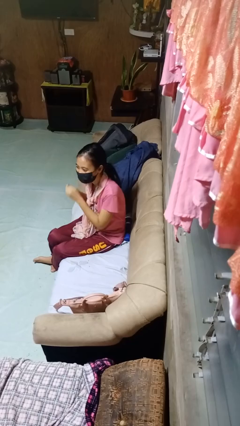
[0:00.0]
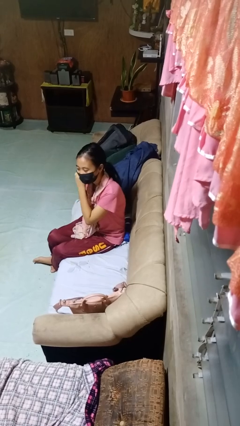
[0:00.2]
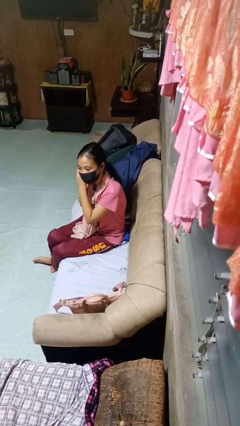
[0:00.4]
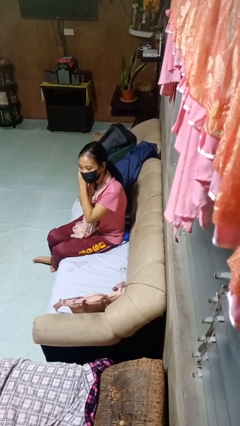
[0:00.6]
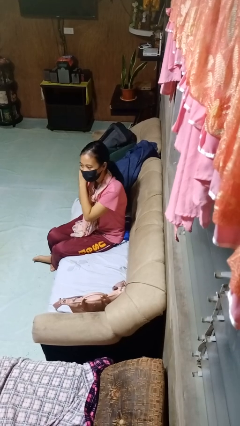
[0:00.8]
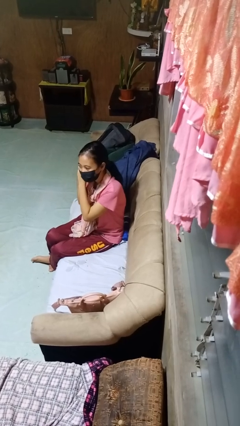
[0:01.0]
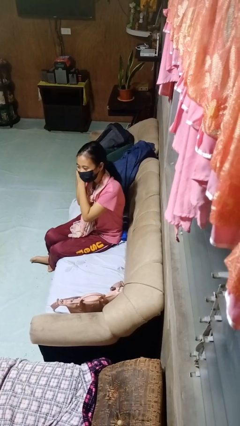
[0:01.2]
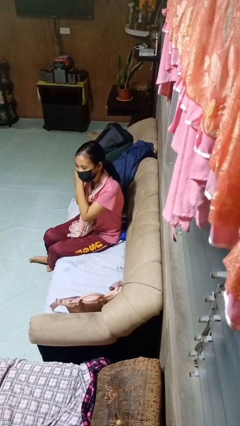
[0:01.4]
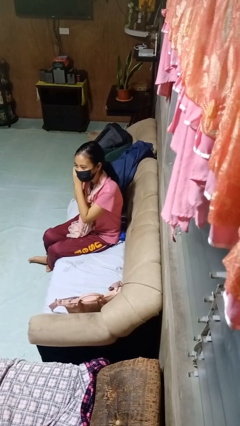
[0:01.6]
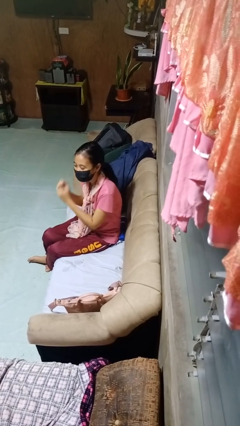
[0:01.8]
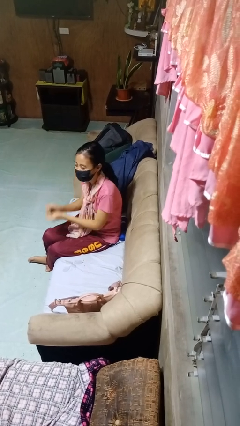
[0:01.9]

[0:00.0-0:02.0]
person puts on earrings

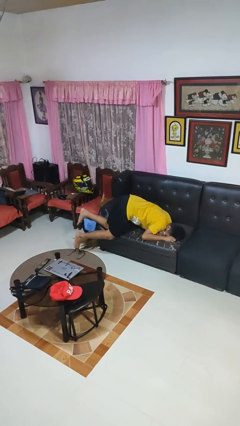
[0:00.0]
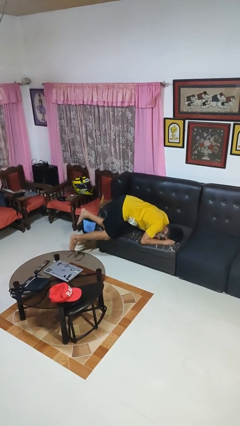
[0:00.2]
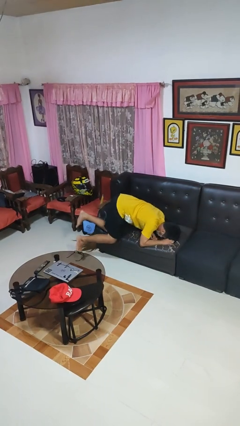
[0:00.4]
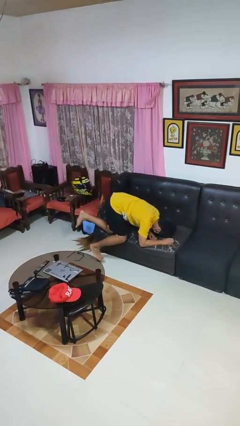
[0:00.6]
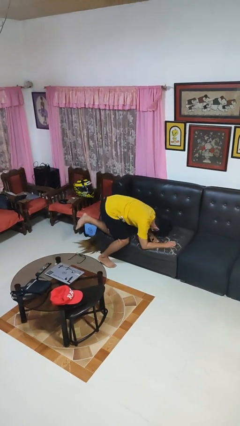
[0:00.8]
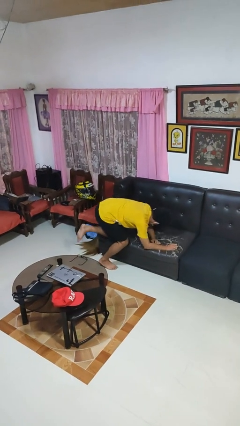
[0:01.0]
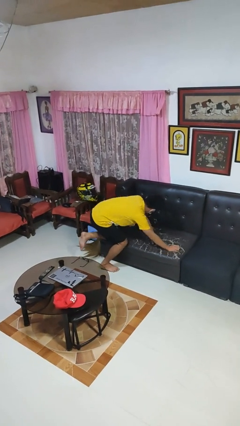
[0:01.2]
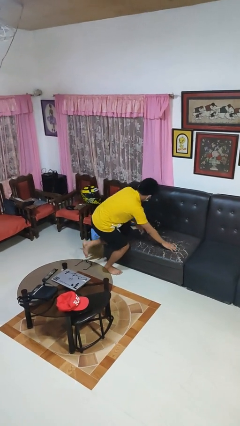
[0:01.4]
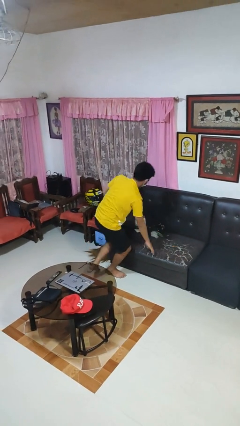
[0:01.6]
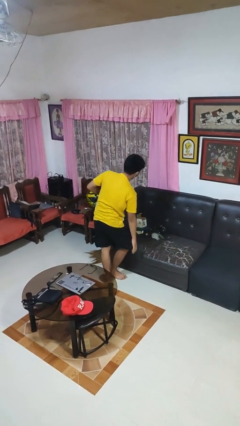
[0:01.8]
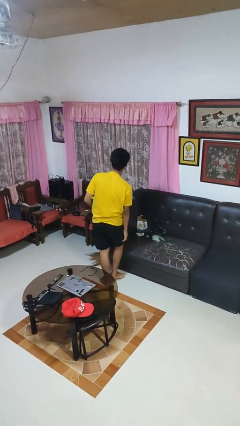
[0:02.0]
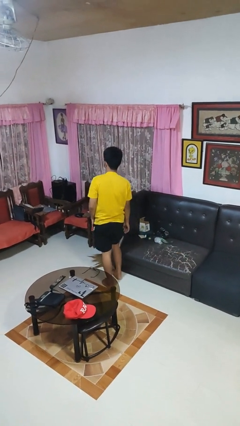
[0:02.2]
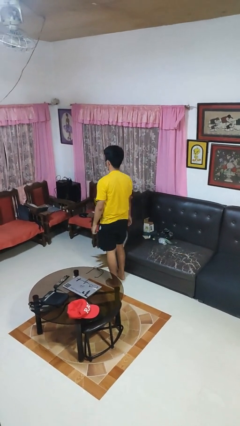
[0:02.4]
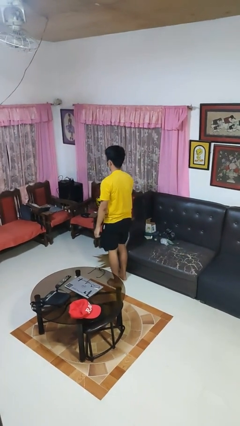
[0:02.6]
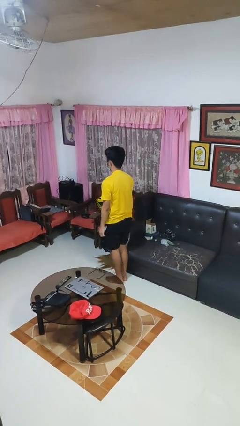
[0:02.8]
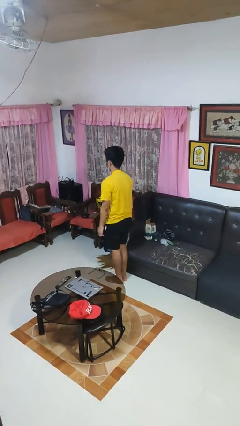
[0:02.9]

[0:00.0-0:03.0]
person stands up

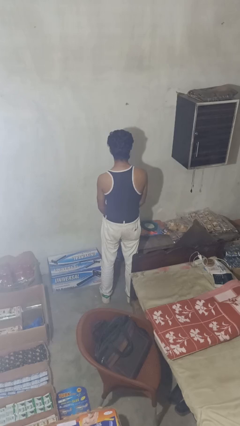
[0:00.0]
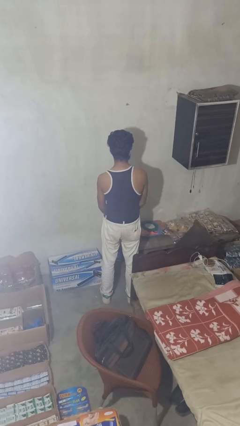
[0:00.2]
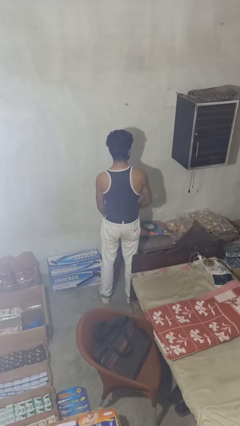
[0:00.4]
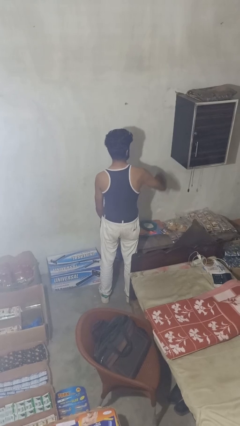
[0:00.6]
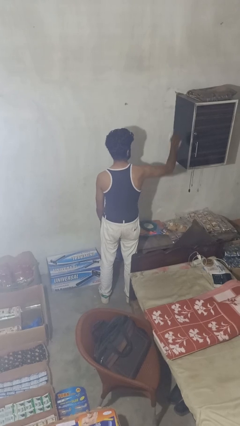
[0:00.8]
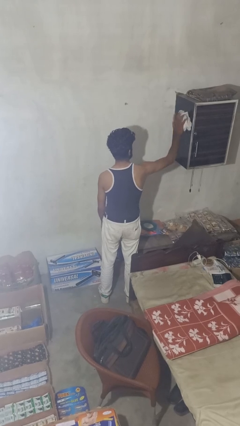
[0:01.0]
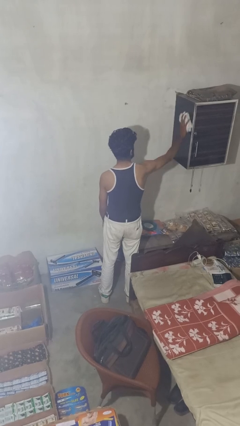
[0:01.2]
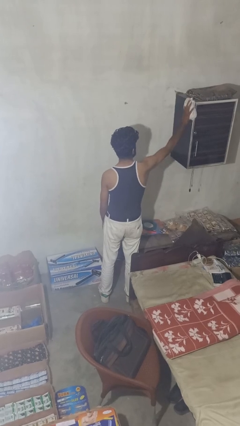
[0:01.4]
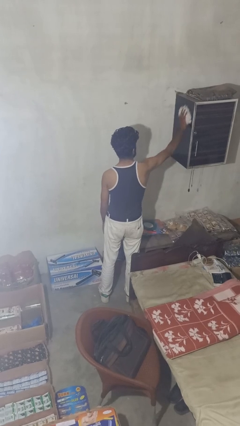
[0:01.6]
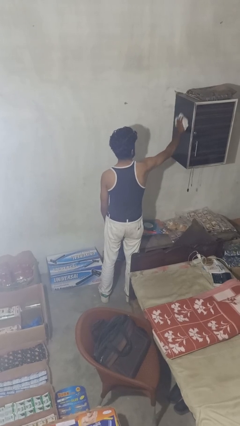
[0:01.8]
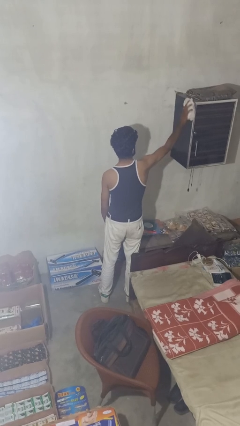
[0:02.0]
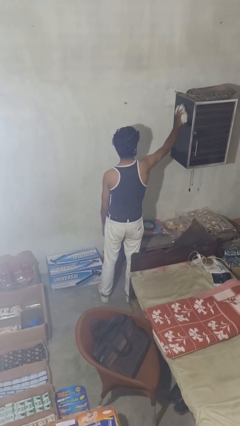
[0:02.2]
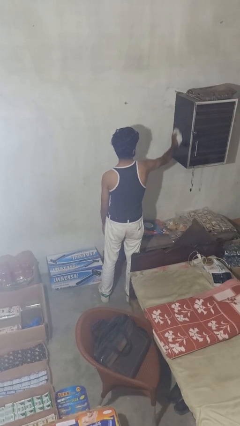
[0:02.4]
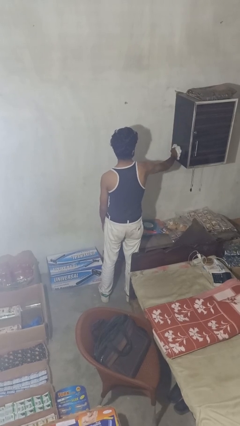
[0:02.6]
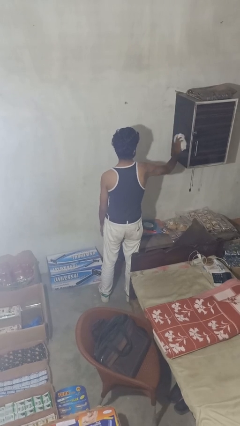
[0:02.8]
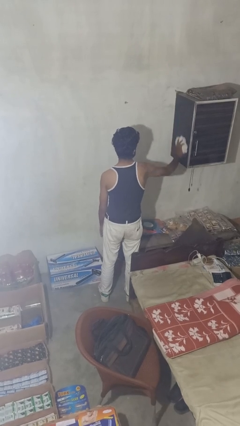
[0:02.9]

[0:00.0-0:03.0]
person dusts furniture

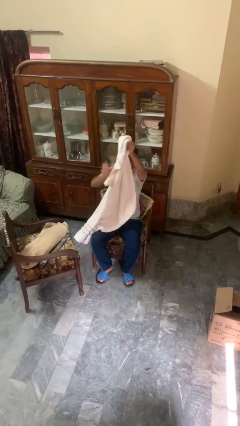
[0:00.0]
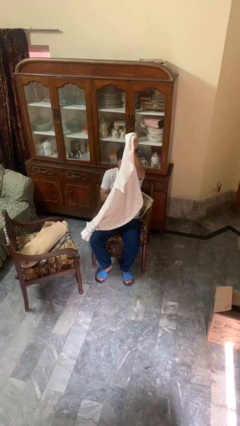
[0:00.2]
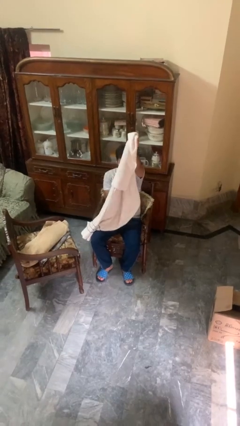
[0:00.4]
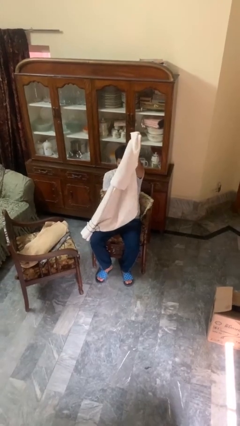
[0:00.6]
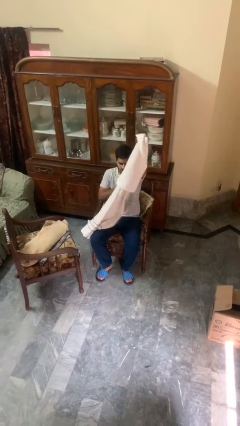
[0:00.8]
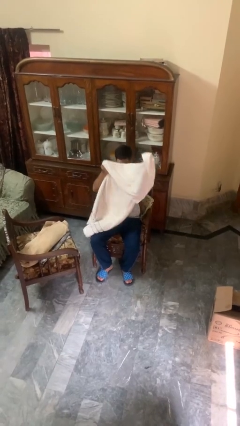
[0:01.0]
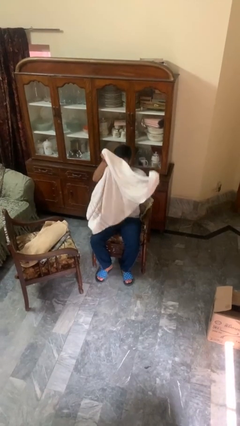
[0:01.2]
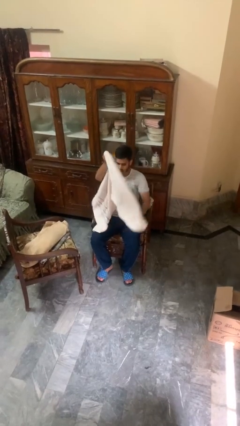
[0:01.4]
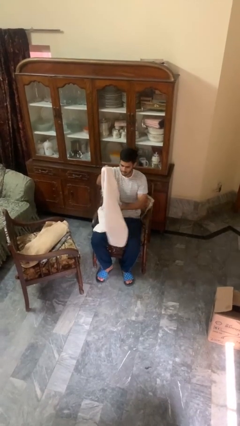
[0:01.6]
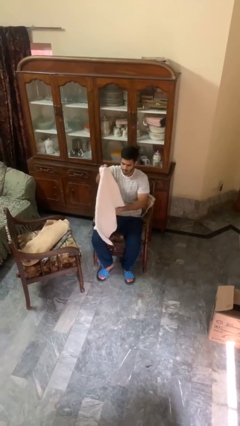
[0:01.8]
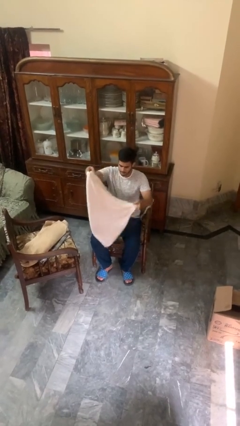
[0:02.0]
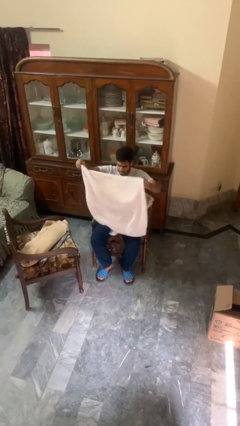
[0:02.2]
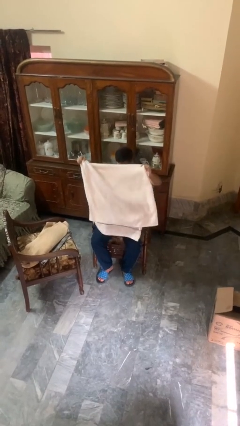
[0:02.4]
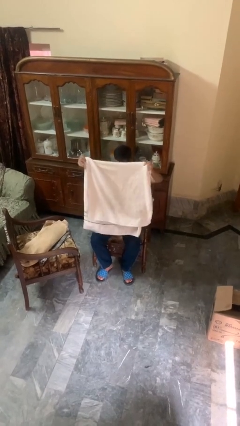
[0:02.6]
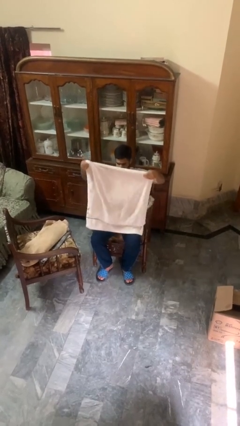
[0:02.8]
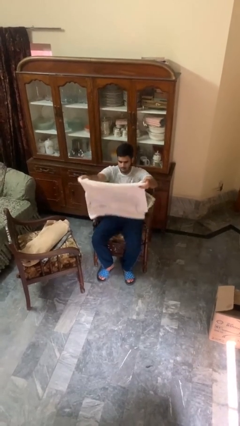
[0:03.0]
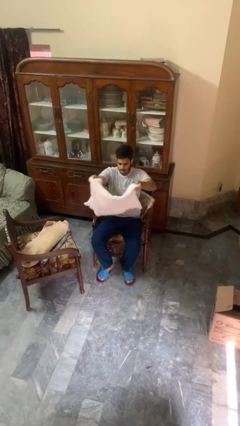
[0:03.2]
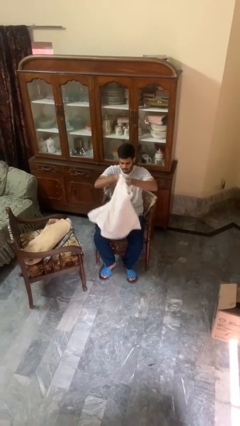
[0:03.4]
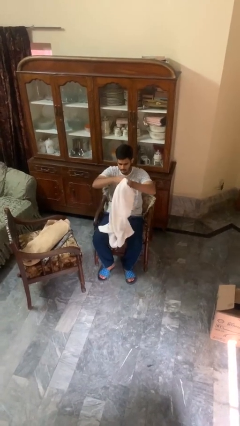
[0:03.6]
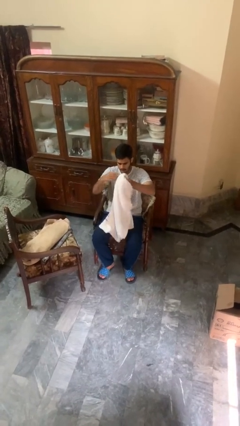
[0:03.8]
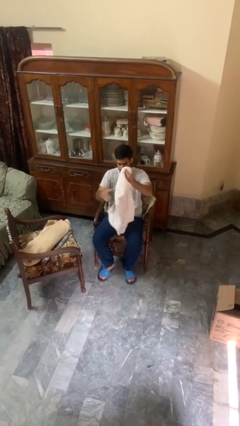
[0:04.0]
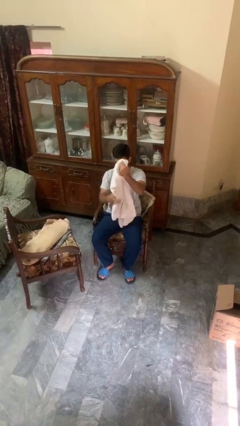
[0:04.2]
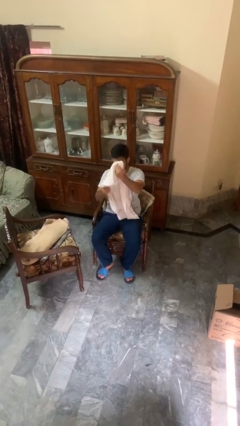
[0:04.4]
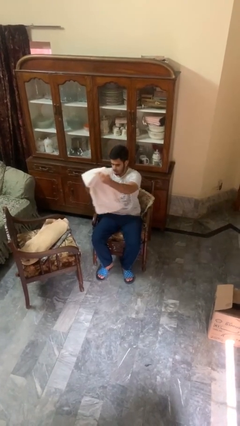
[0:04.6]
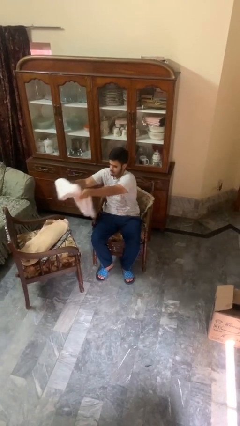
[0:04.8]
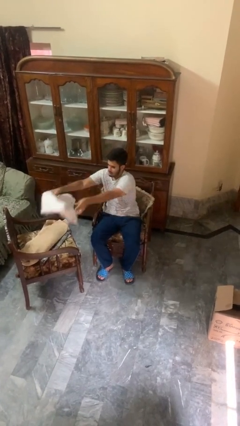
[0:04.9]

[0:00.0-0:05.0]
person folds towel

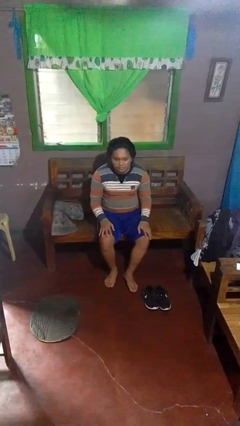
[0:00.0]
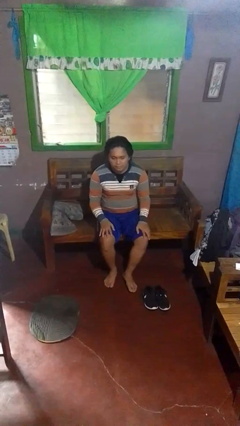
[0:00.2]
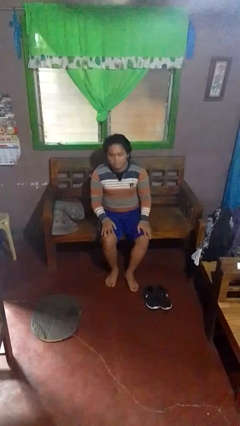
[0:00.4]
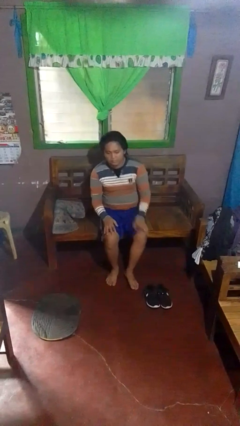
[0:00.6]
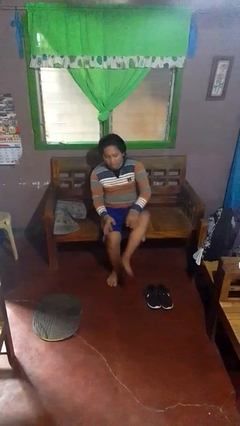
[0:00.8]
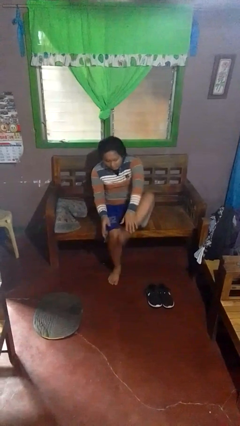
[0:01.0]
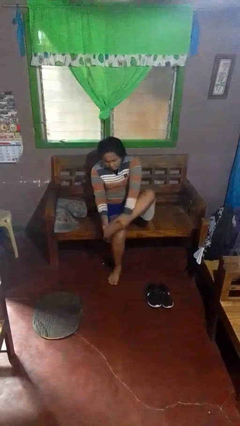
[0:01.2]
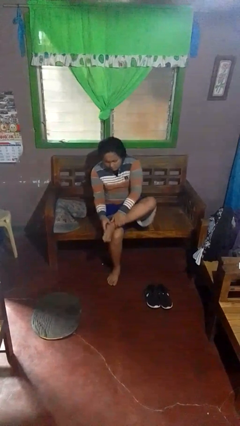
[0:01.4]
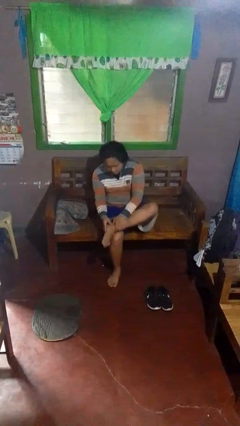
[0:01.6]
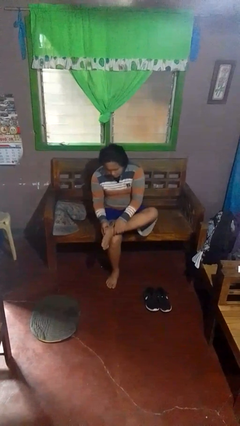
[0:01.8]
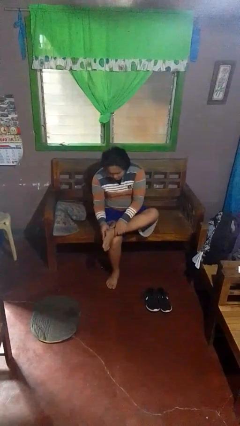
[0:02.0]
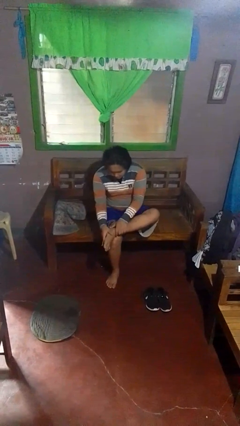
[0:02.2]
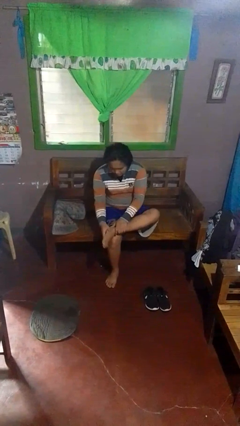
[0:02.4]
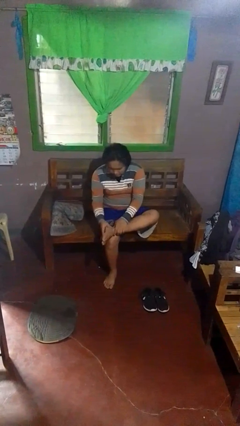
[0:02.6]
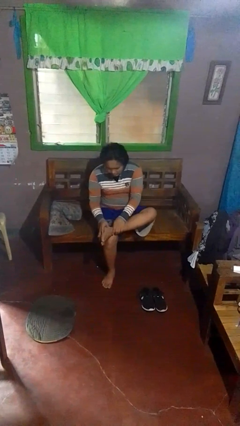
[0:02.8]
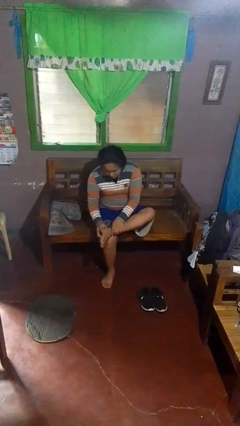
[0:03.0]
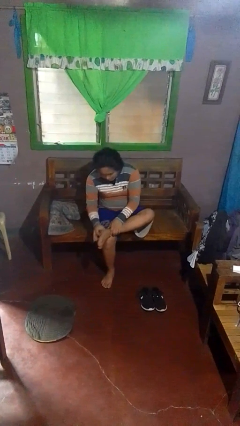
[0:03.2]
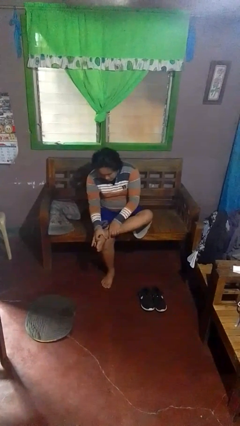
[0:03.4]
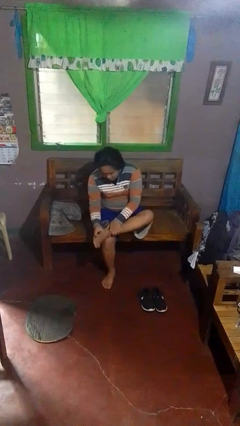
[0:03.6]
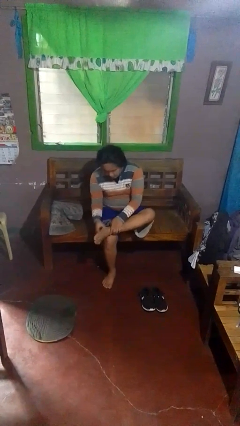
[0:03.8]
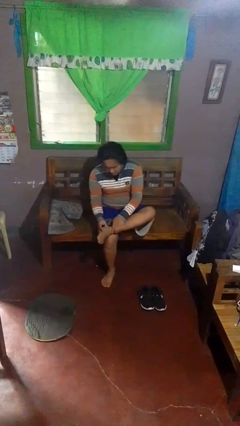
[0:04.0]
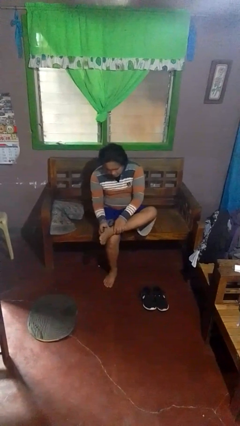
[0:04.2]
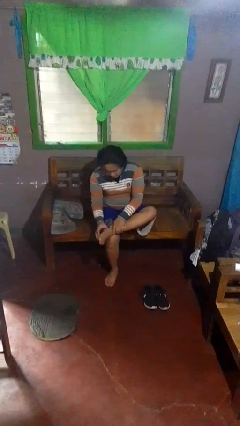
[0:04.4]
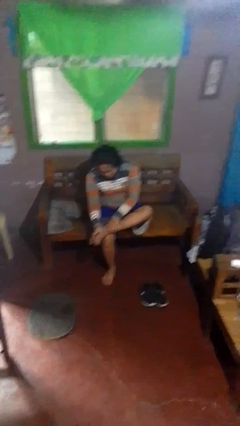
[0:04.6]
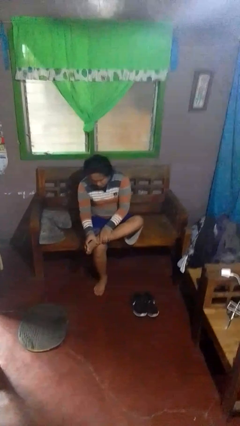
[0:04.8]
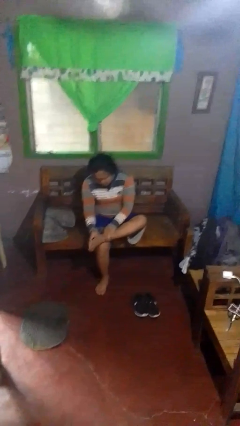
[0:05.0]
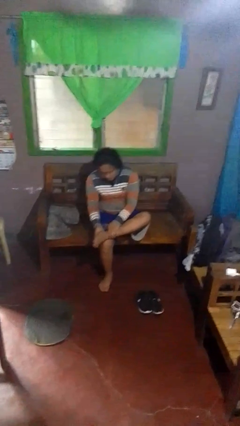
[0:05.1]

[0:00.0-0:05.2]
person rubs foot
